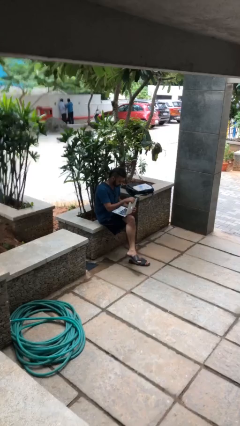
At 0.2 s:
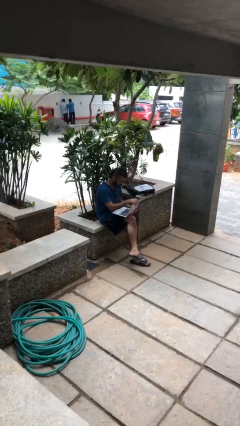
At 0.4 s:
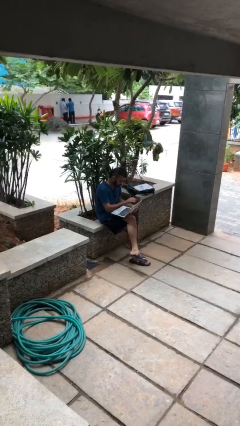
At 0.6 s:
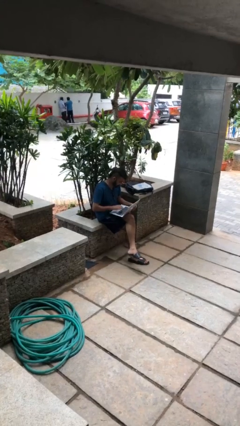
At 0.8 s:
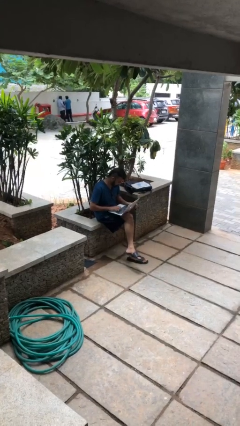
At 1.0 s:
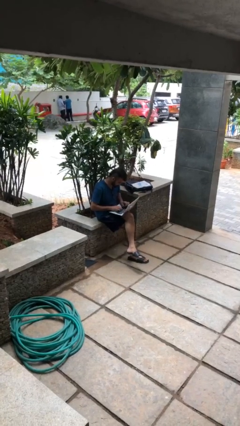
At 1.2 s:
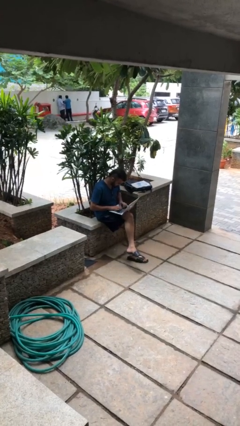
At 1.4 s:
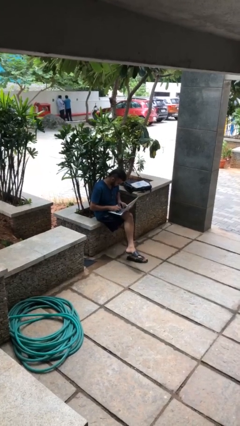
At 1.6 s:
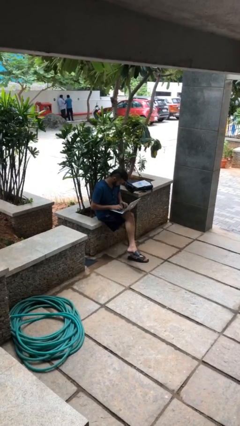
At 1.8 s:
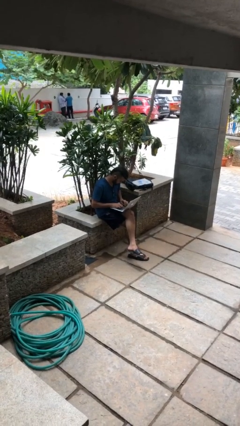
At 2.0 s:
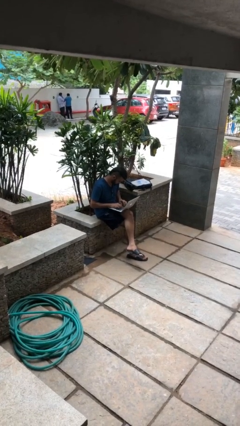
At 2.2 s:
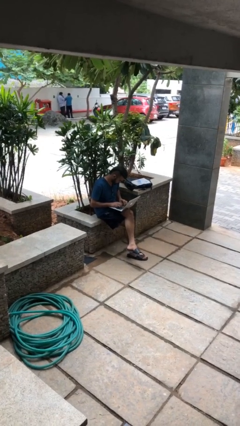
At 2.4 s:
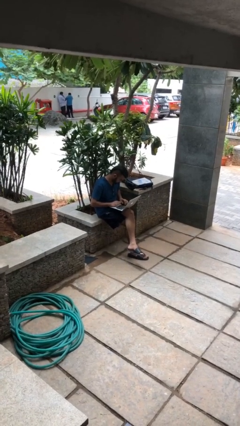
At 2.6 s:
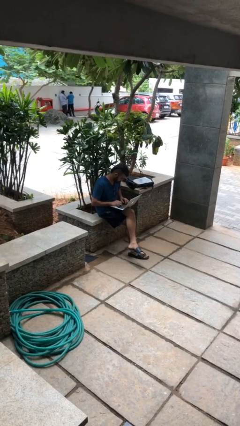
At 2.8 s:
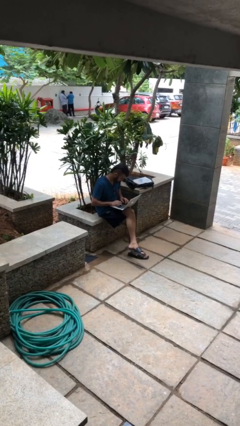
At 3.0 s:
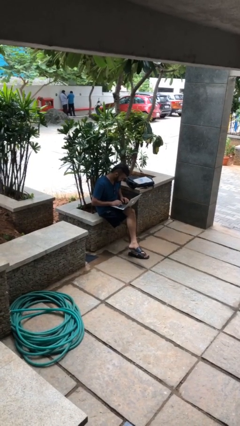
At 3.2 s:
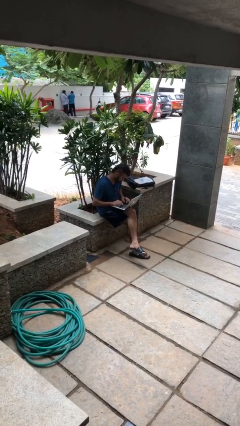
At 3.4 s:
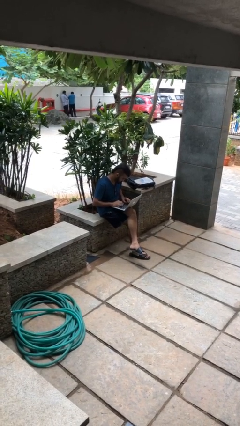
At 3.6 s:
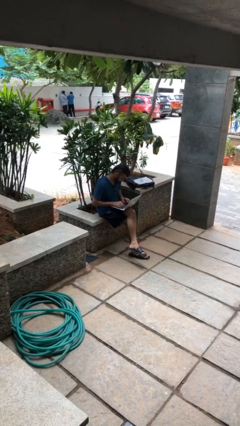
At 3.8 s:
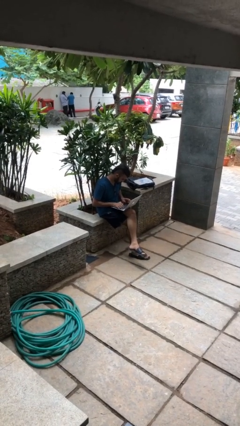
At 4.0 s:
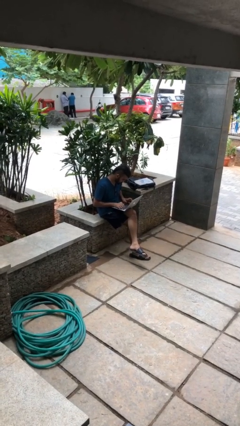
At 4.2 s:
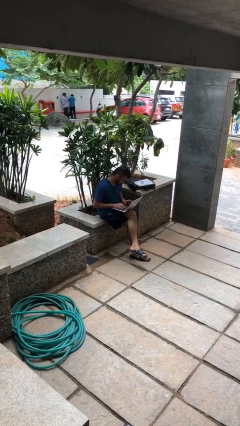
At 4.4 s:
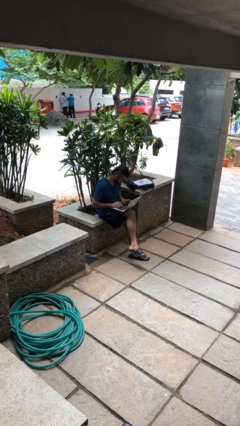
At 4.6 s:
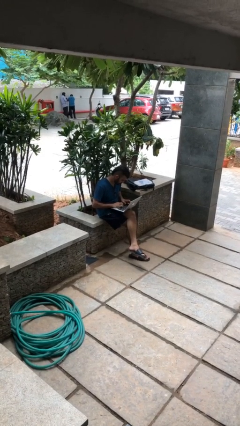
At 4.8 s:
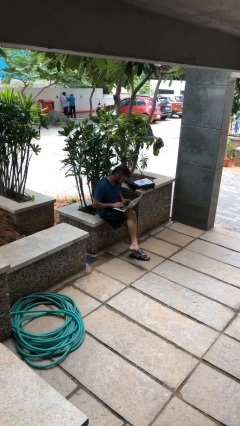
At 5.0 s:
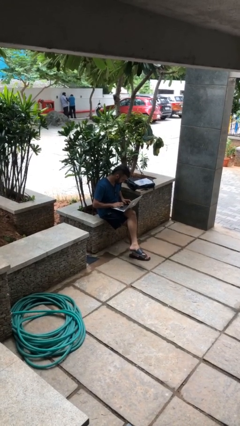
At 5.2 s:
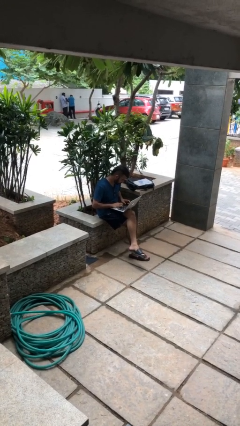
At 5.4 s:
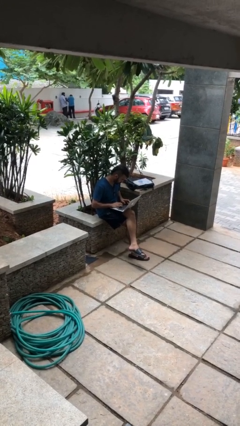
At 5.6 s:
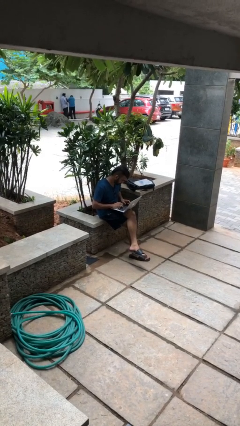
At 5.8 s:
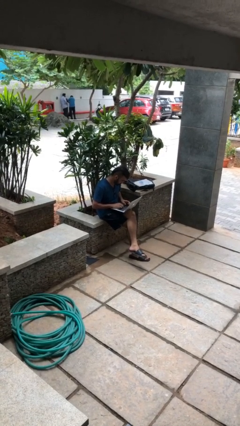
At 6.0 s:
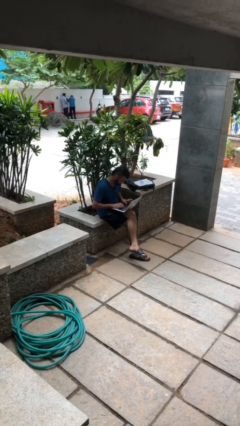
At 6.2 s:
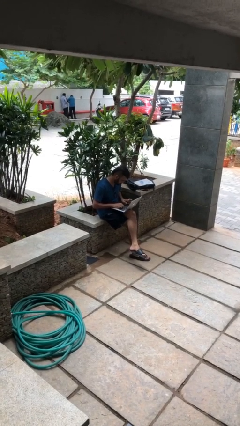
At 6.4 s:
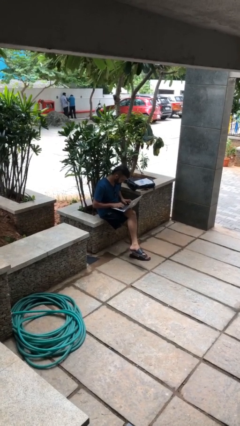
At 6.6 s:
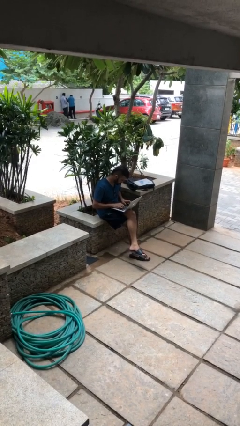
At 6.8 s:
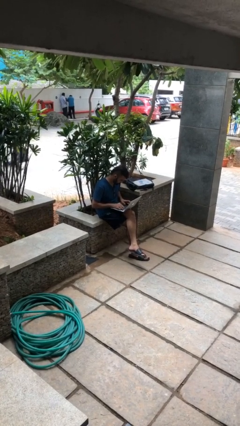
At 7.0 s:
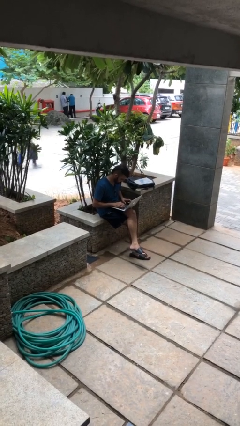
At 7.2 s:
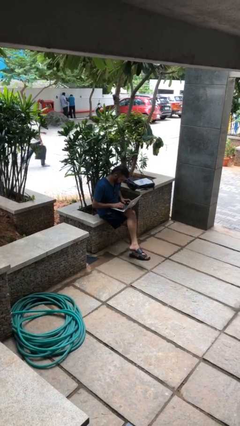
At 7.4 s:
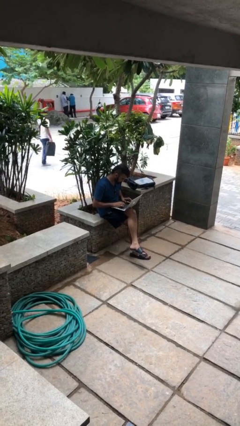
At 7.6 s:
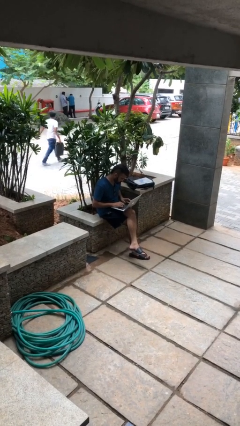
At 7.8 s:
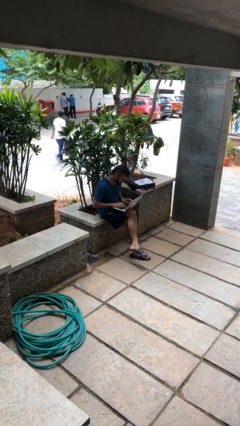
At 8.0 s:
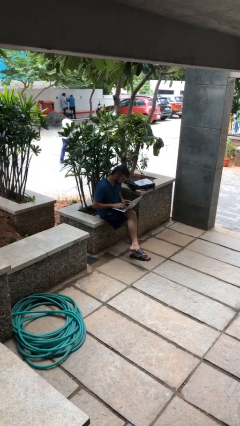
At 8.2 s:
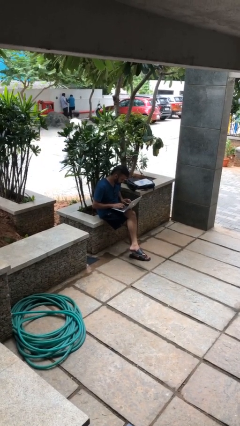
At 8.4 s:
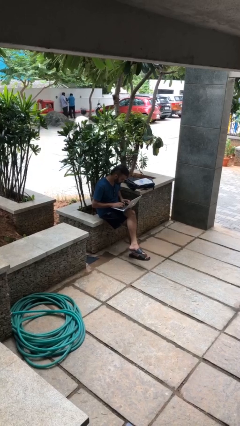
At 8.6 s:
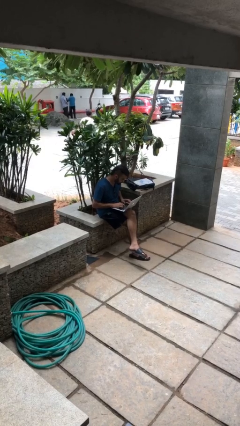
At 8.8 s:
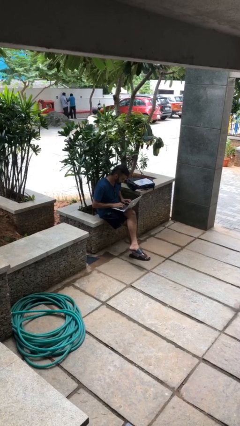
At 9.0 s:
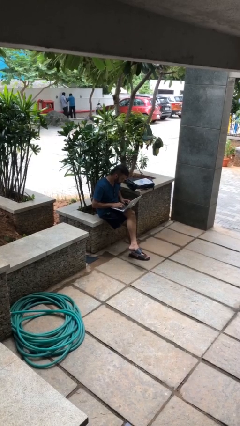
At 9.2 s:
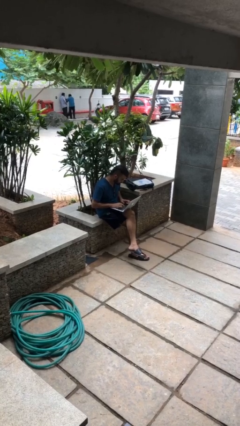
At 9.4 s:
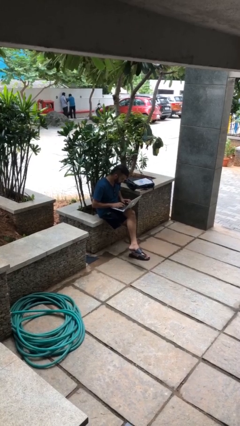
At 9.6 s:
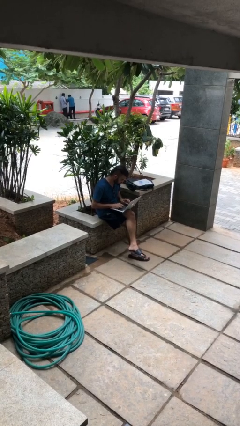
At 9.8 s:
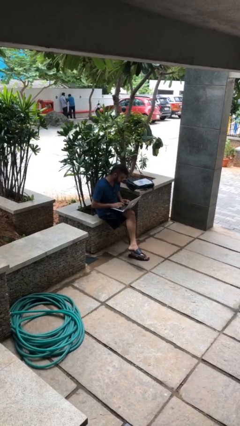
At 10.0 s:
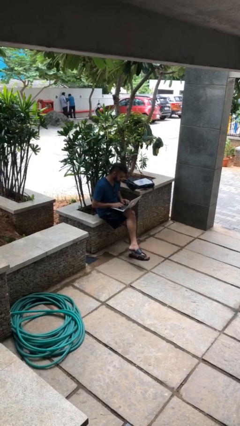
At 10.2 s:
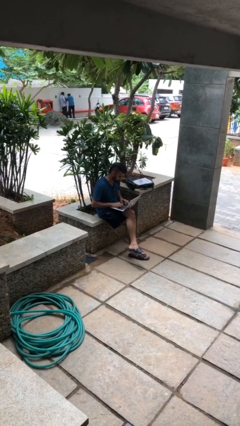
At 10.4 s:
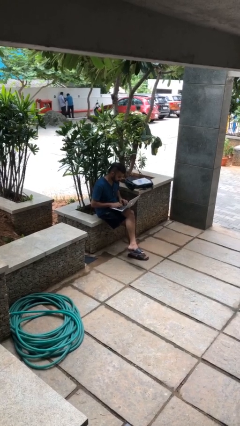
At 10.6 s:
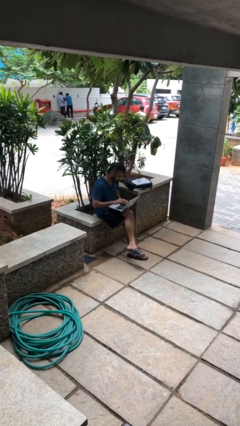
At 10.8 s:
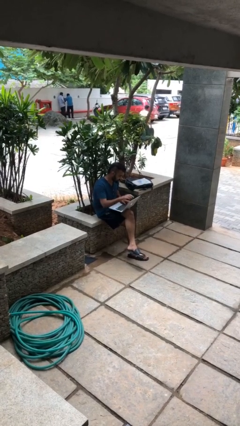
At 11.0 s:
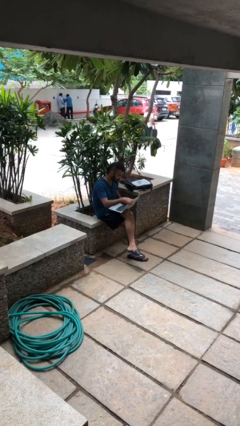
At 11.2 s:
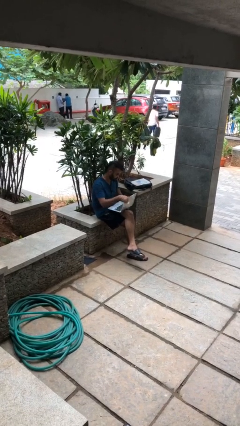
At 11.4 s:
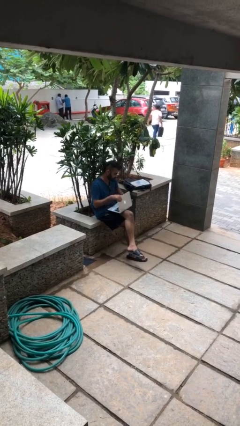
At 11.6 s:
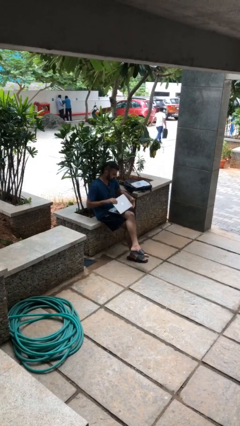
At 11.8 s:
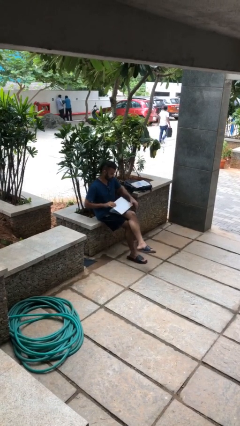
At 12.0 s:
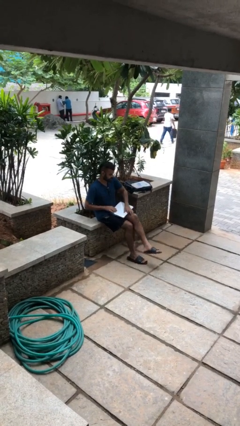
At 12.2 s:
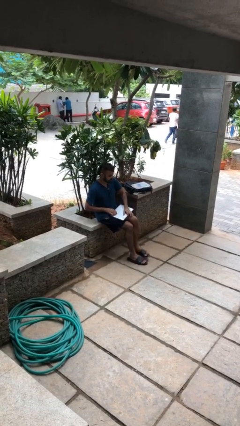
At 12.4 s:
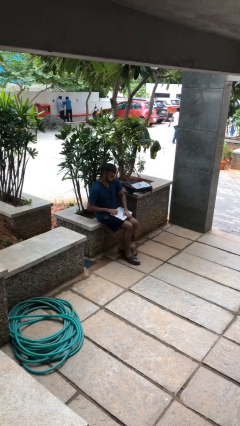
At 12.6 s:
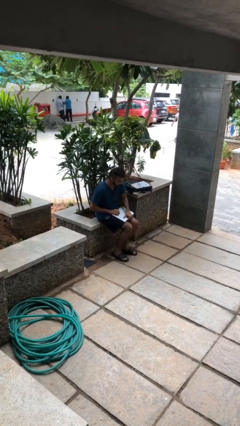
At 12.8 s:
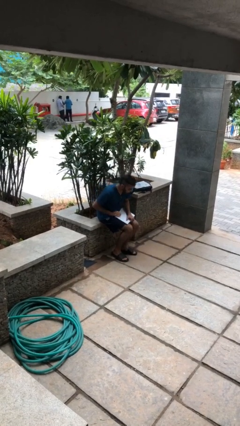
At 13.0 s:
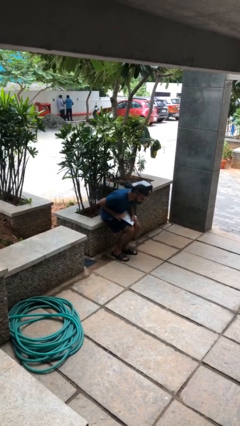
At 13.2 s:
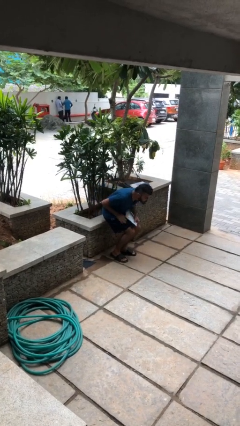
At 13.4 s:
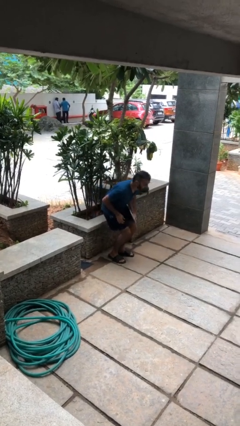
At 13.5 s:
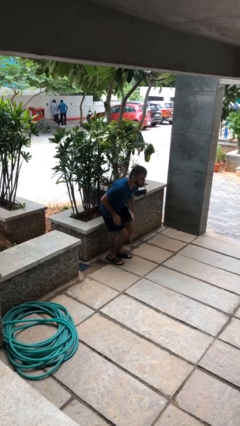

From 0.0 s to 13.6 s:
person interacts with laptop

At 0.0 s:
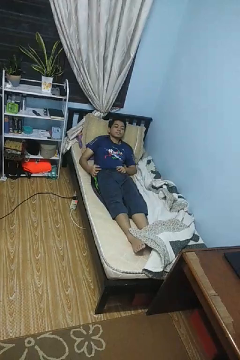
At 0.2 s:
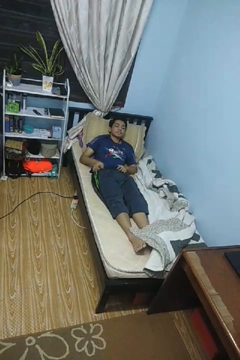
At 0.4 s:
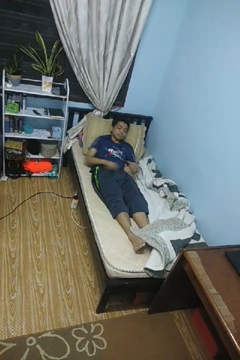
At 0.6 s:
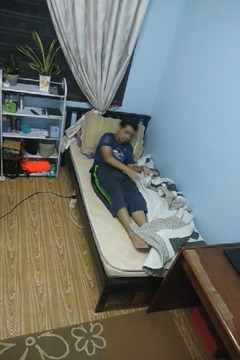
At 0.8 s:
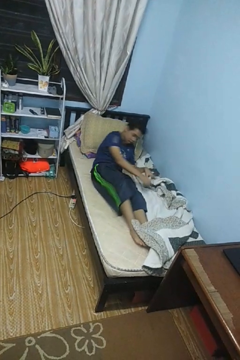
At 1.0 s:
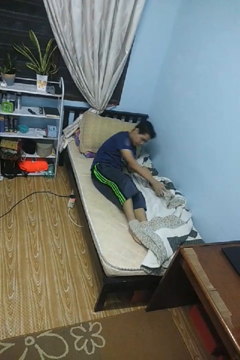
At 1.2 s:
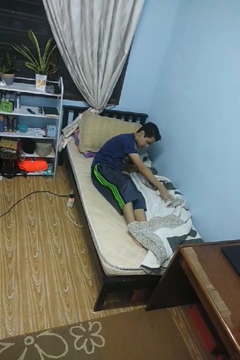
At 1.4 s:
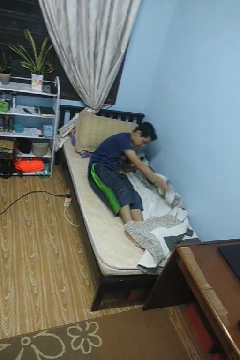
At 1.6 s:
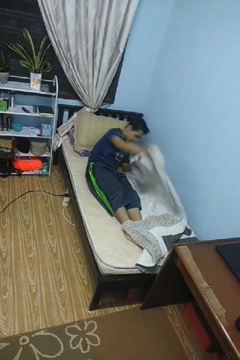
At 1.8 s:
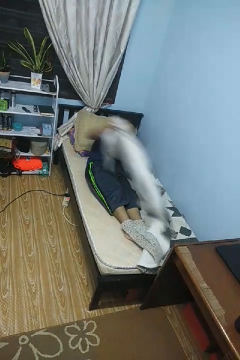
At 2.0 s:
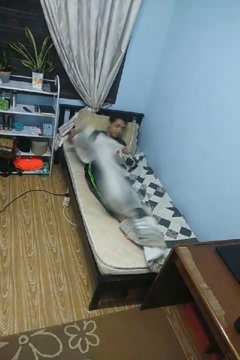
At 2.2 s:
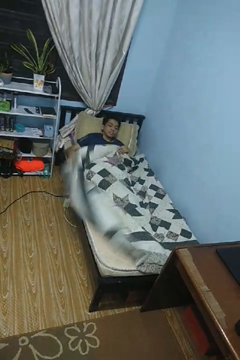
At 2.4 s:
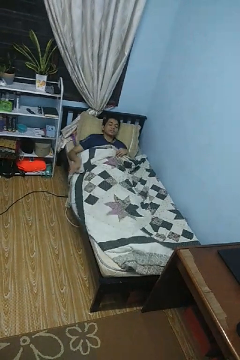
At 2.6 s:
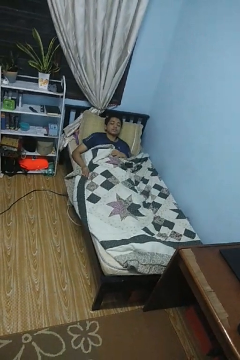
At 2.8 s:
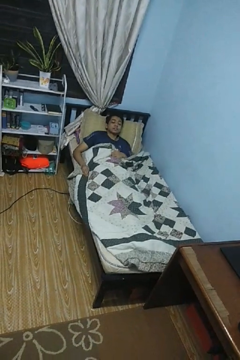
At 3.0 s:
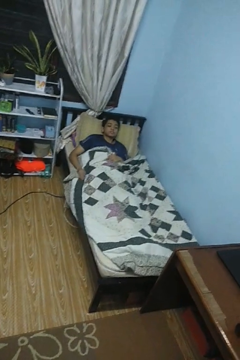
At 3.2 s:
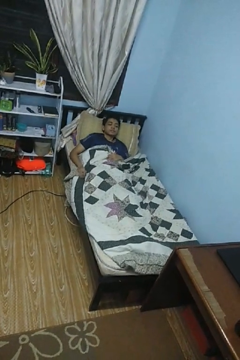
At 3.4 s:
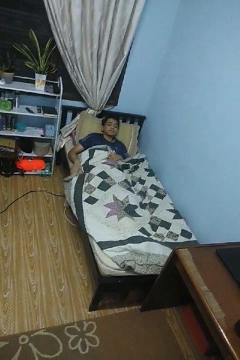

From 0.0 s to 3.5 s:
person covers with bedsheets

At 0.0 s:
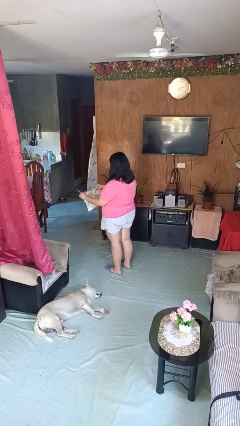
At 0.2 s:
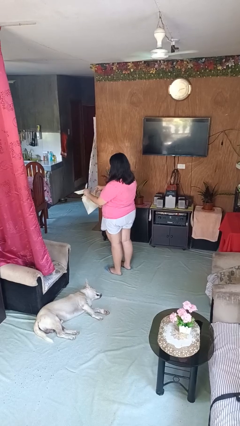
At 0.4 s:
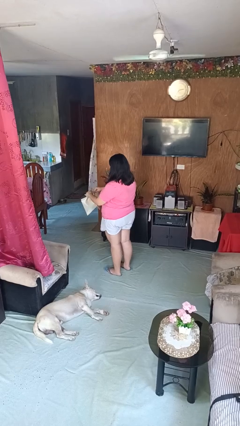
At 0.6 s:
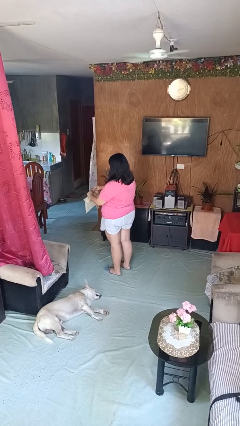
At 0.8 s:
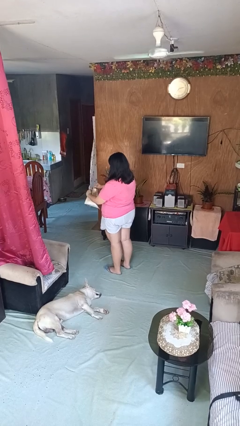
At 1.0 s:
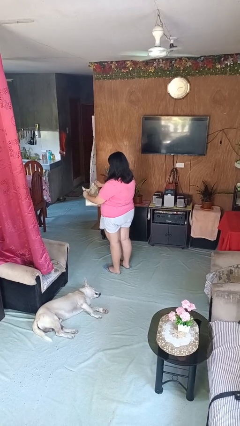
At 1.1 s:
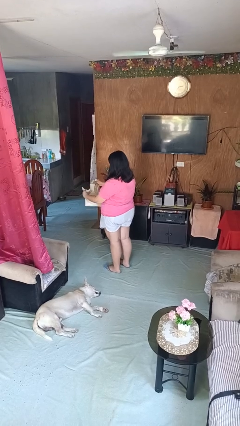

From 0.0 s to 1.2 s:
person tears paper

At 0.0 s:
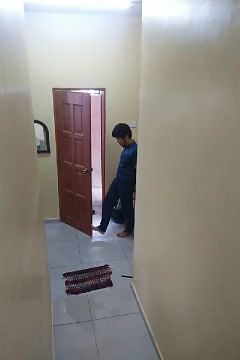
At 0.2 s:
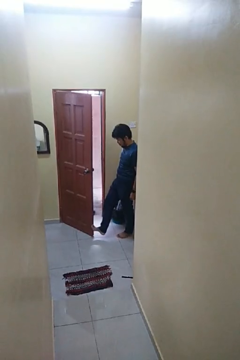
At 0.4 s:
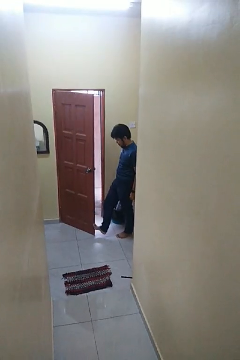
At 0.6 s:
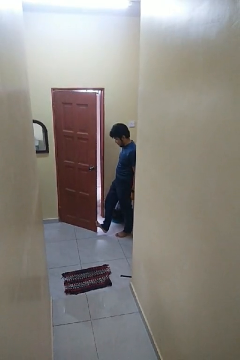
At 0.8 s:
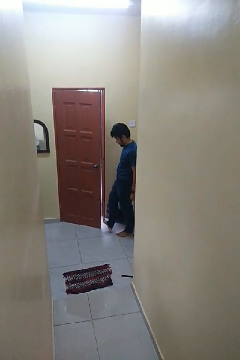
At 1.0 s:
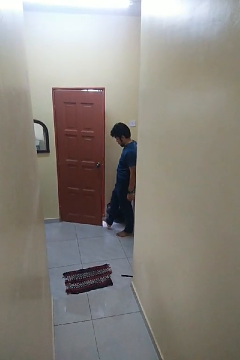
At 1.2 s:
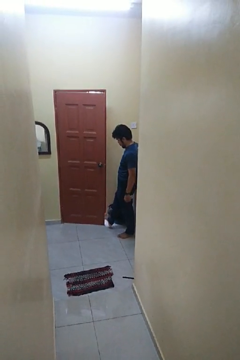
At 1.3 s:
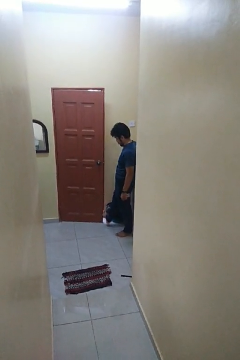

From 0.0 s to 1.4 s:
person closes door with foot
